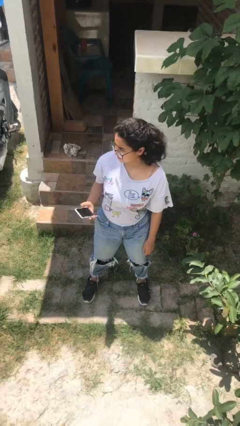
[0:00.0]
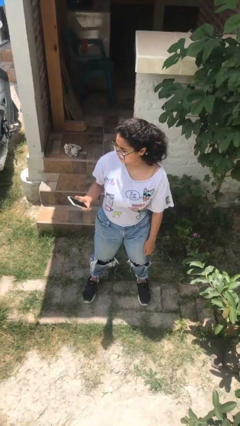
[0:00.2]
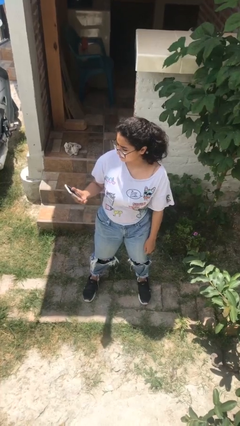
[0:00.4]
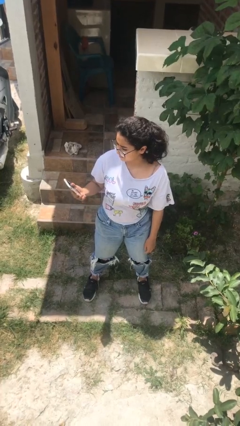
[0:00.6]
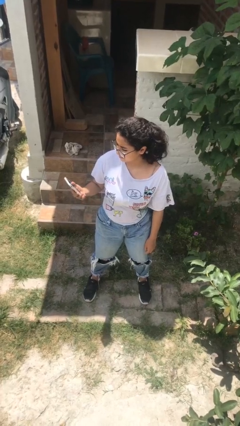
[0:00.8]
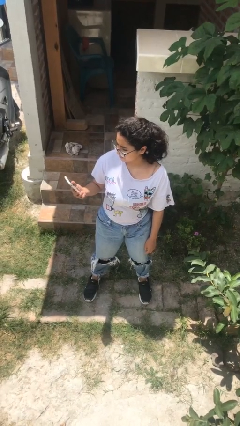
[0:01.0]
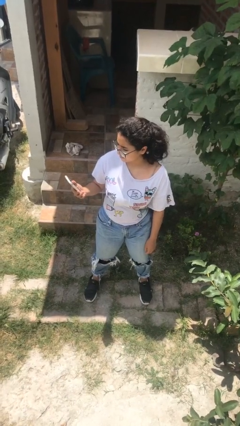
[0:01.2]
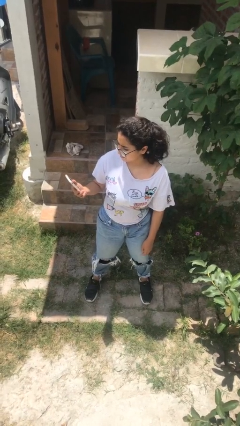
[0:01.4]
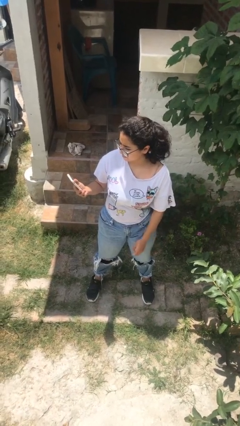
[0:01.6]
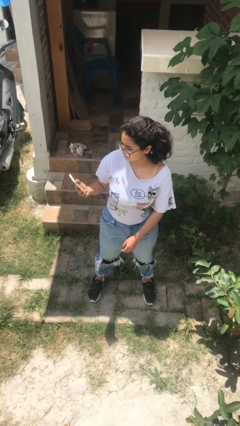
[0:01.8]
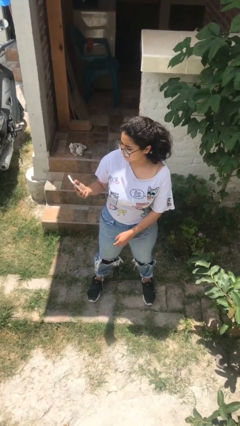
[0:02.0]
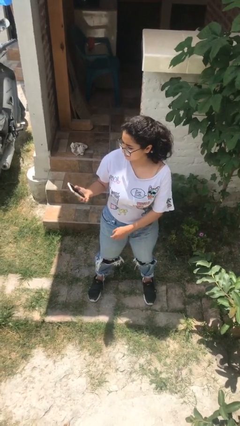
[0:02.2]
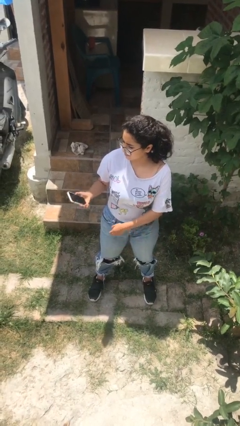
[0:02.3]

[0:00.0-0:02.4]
person puts phone into pocket

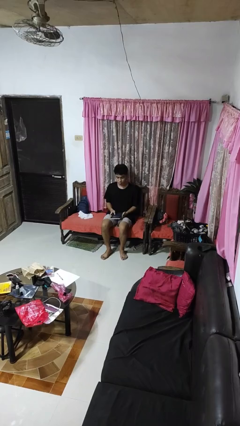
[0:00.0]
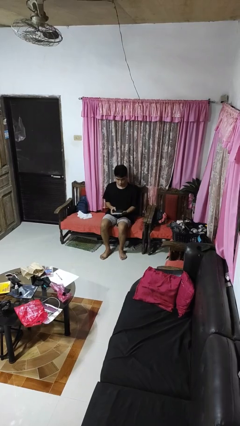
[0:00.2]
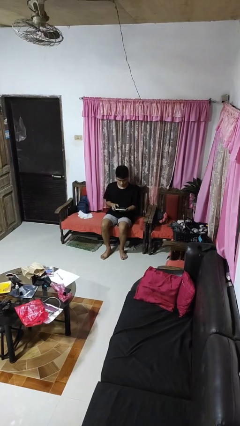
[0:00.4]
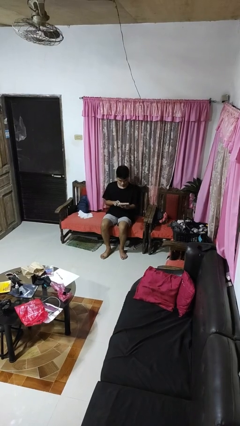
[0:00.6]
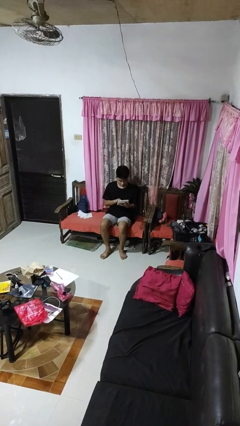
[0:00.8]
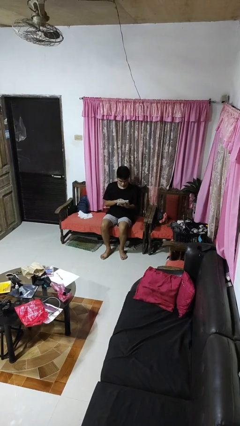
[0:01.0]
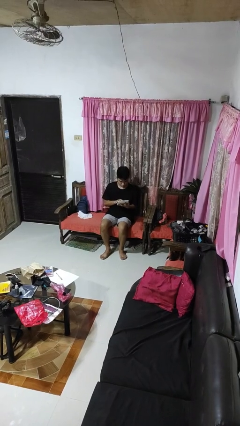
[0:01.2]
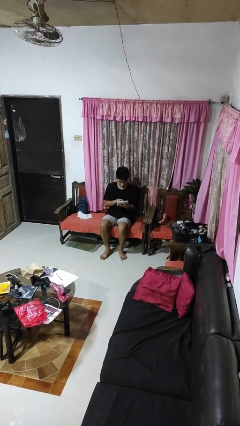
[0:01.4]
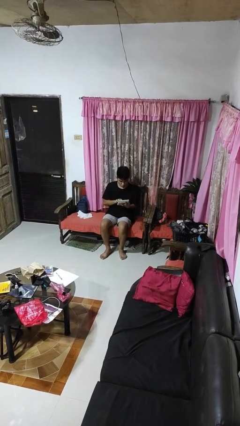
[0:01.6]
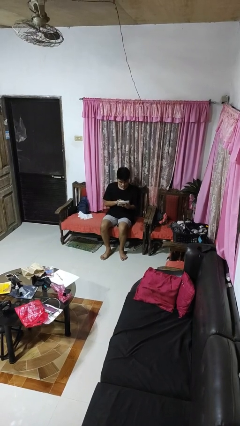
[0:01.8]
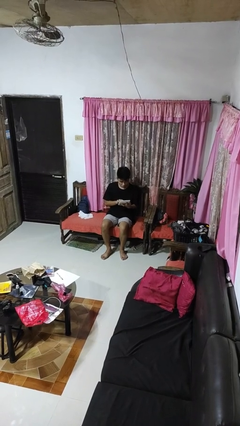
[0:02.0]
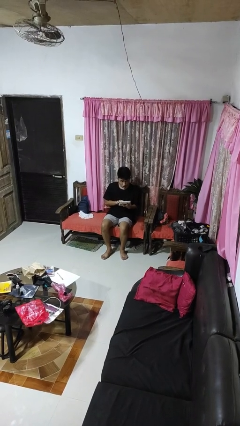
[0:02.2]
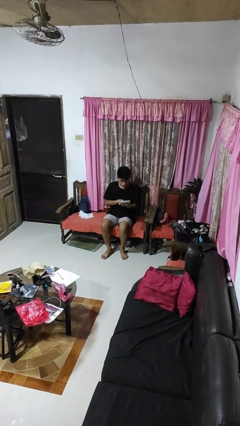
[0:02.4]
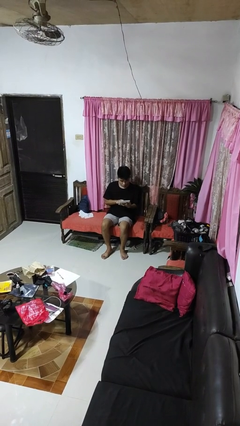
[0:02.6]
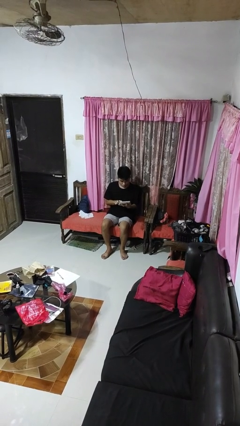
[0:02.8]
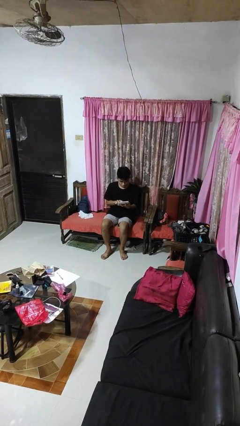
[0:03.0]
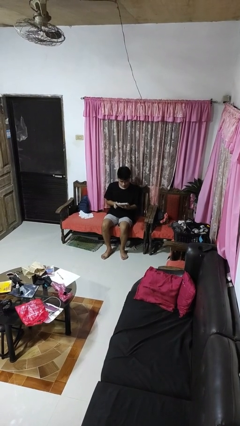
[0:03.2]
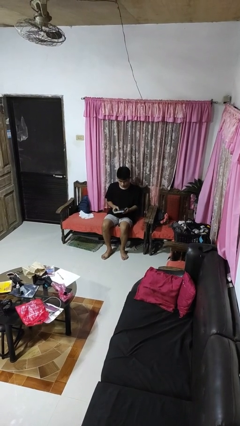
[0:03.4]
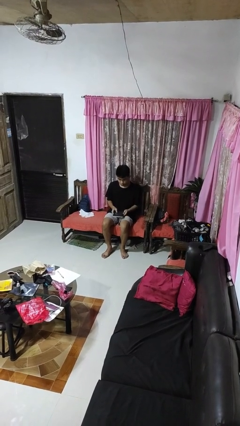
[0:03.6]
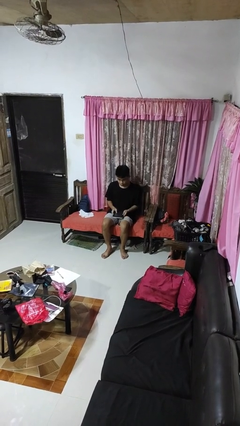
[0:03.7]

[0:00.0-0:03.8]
person interacts with tablet

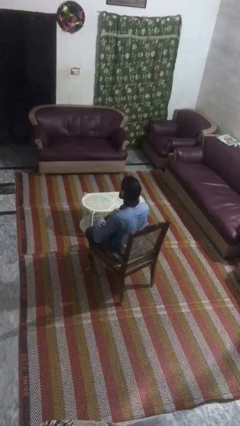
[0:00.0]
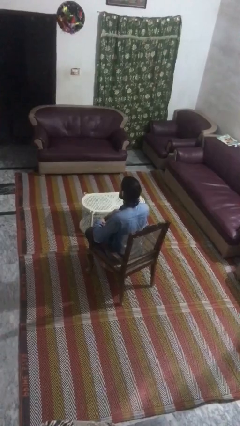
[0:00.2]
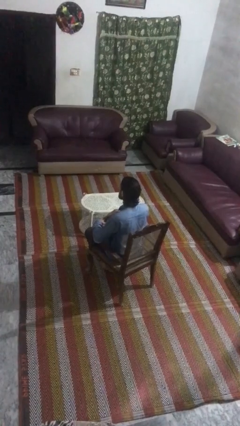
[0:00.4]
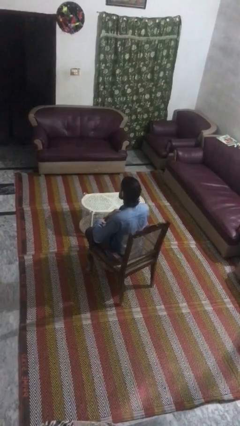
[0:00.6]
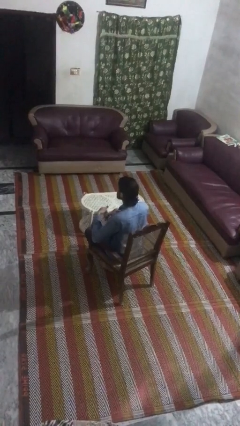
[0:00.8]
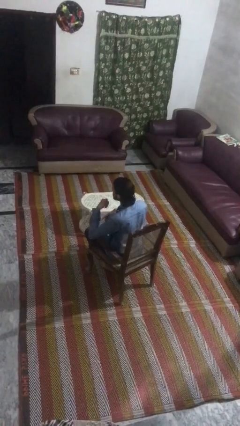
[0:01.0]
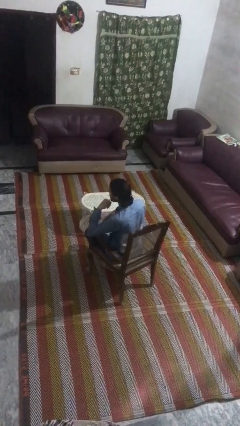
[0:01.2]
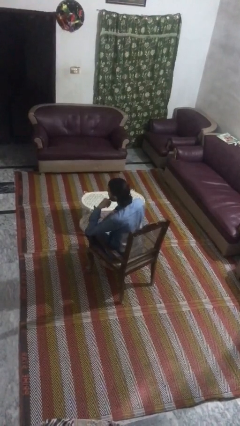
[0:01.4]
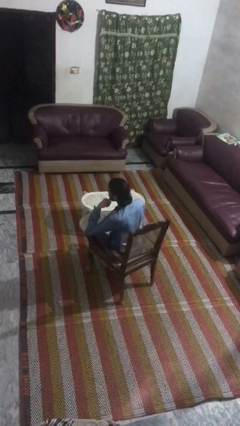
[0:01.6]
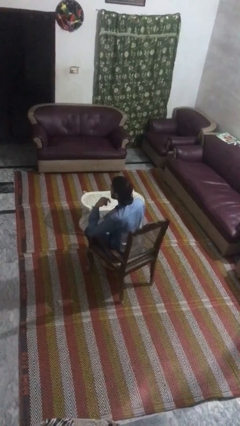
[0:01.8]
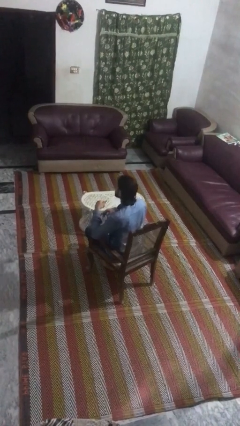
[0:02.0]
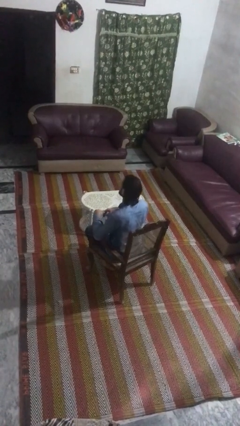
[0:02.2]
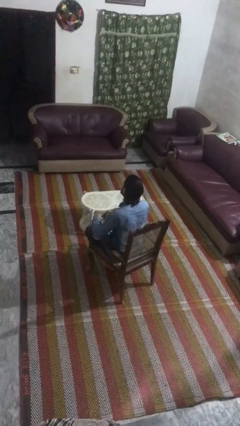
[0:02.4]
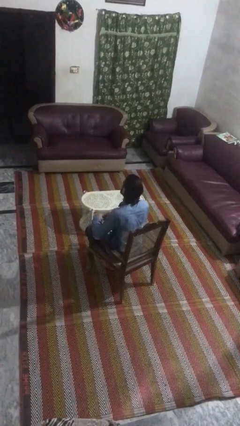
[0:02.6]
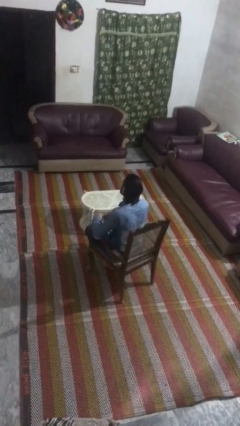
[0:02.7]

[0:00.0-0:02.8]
person gestures call me

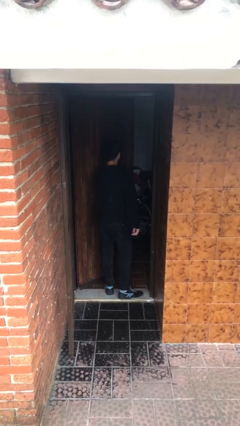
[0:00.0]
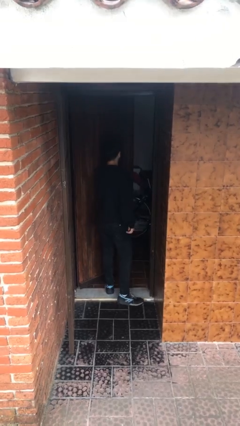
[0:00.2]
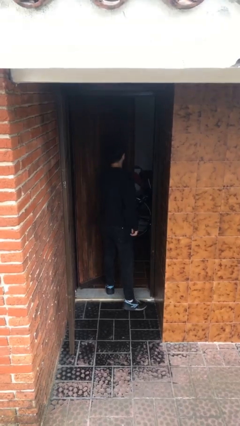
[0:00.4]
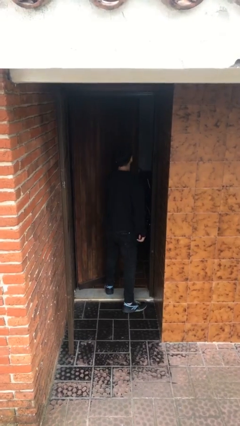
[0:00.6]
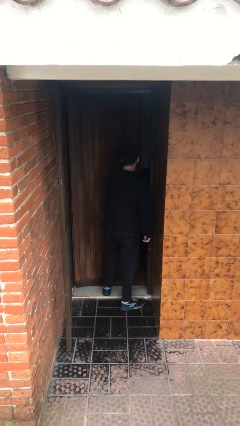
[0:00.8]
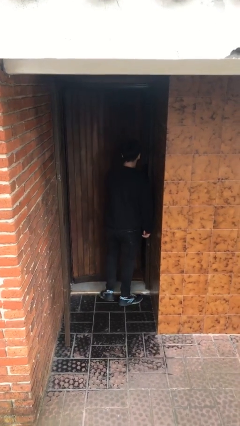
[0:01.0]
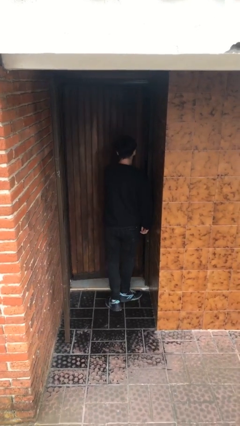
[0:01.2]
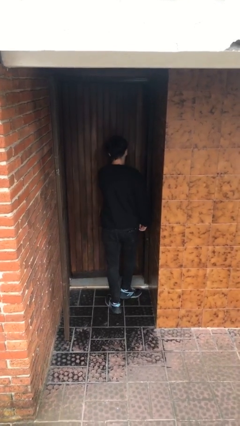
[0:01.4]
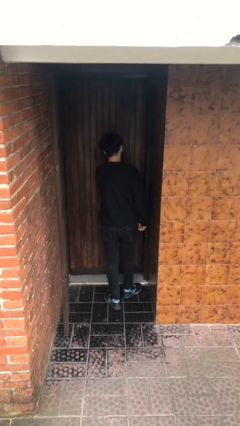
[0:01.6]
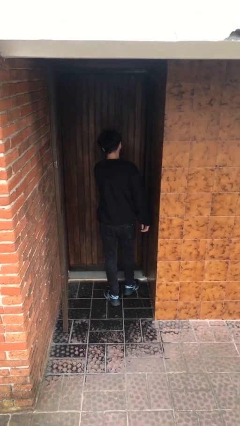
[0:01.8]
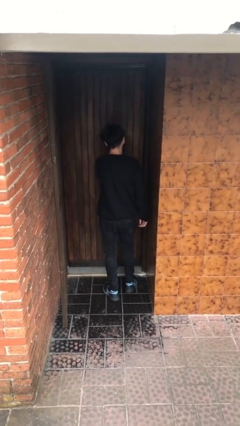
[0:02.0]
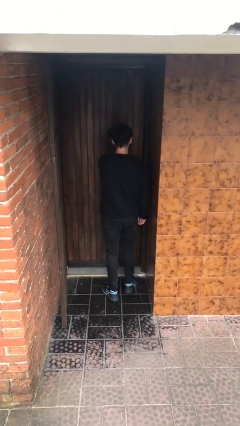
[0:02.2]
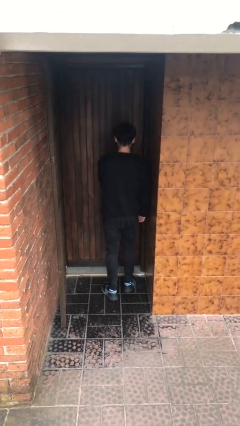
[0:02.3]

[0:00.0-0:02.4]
person closes facility door

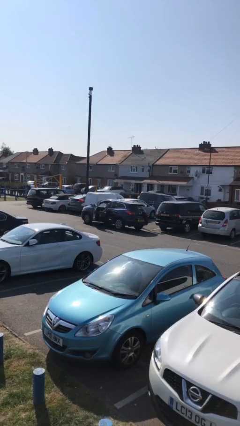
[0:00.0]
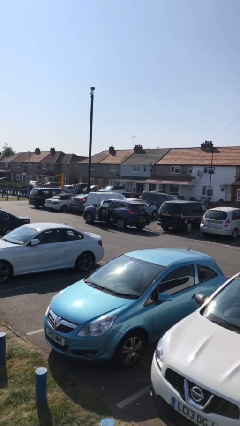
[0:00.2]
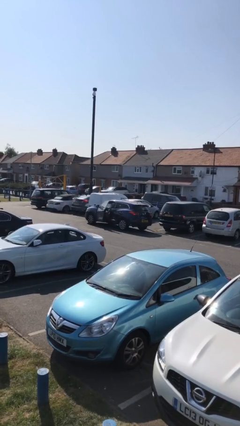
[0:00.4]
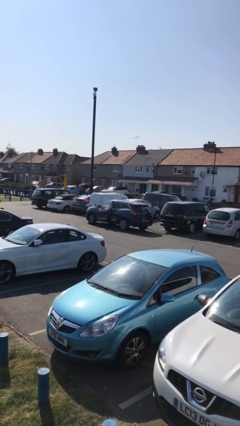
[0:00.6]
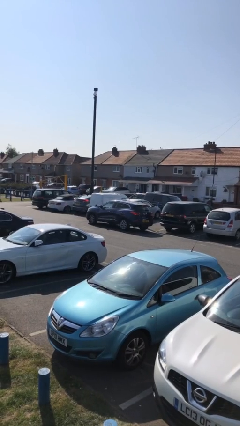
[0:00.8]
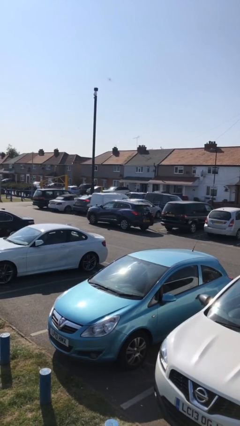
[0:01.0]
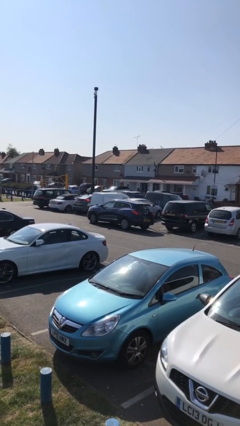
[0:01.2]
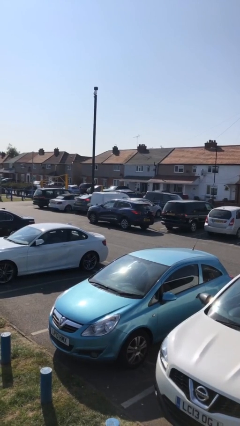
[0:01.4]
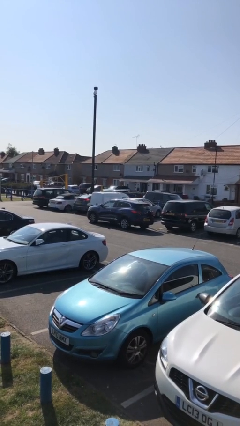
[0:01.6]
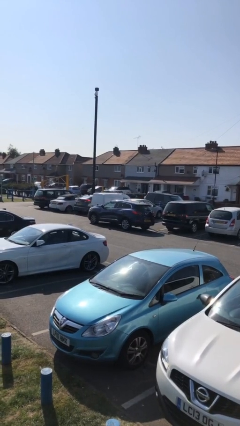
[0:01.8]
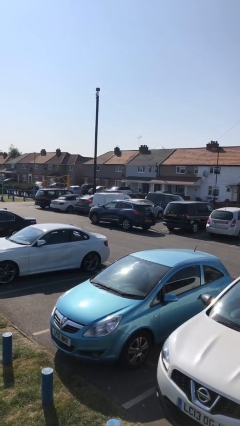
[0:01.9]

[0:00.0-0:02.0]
car picks up person

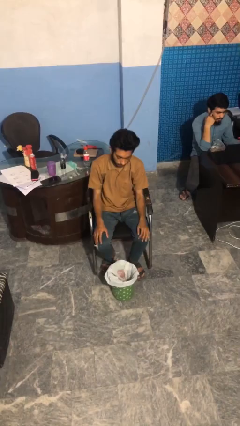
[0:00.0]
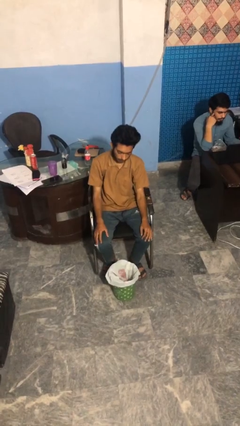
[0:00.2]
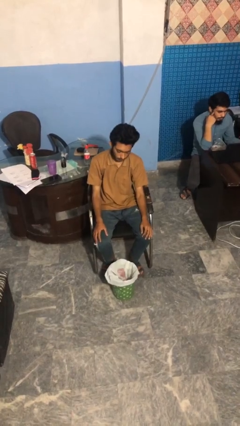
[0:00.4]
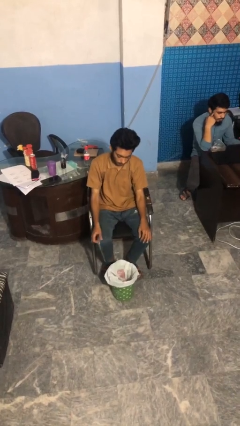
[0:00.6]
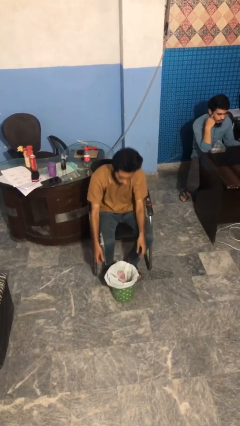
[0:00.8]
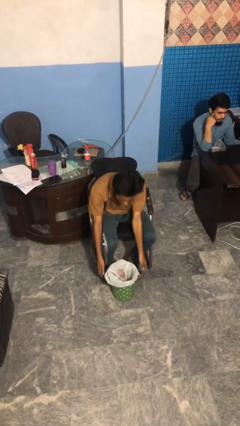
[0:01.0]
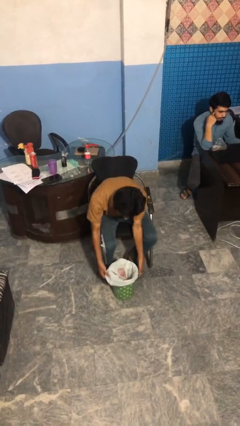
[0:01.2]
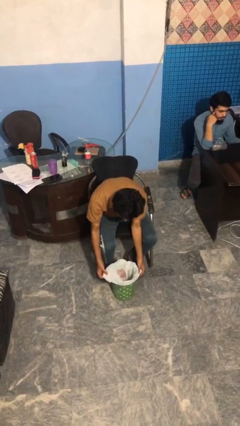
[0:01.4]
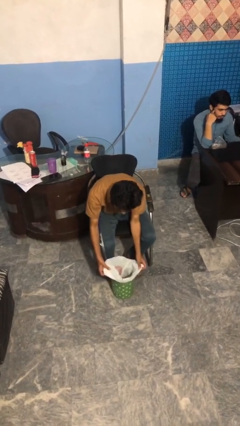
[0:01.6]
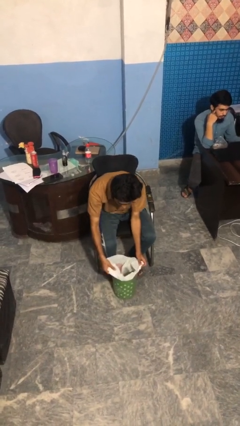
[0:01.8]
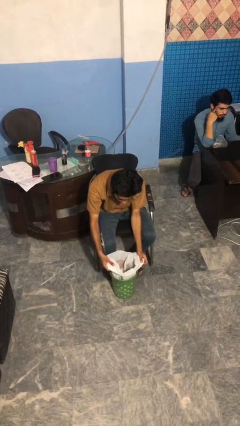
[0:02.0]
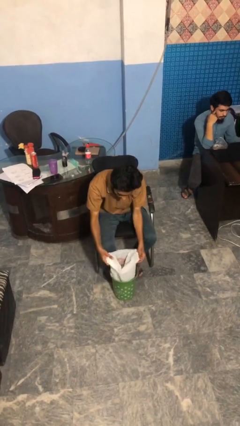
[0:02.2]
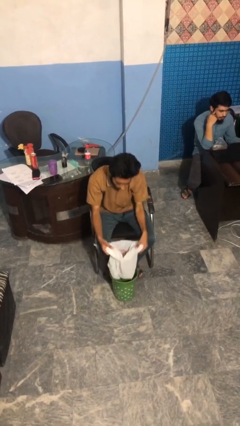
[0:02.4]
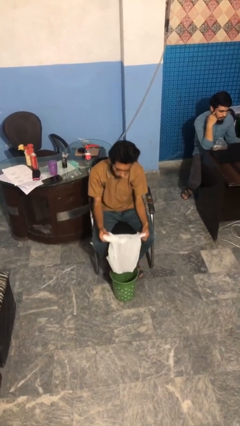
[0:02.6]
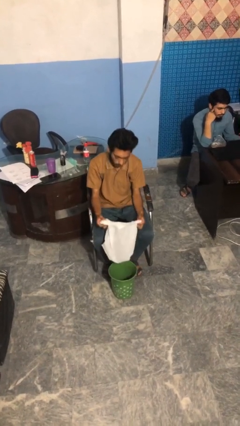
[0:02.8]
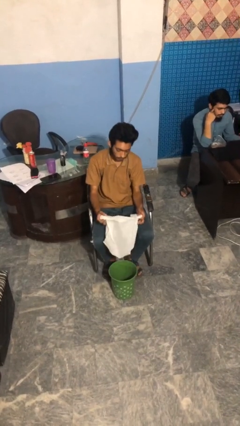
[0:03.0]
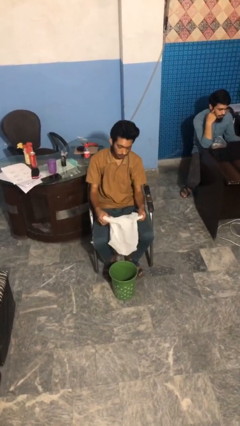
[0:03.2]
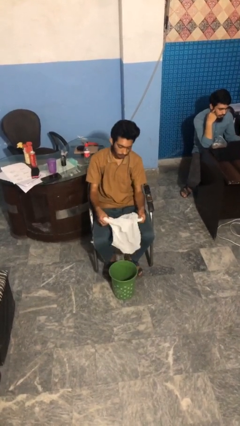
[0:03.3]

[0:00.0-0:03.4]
person removes trashbag from trashcan

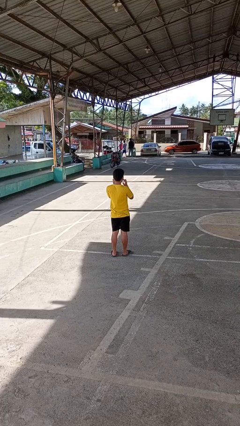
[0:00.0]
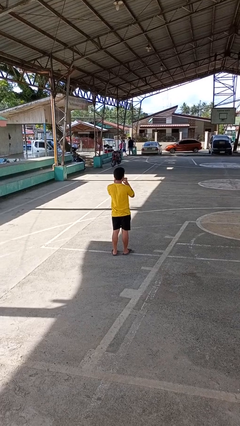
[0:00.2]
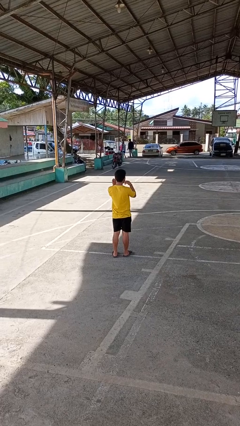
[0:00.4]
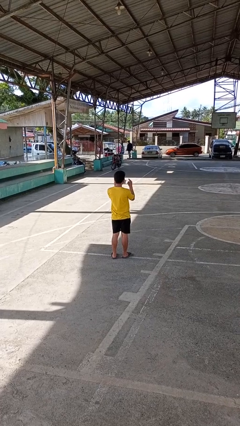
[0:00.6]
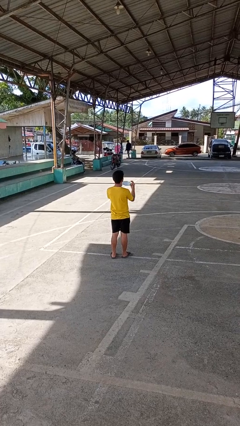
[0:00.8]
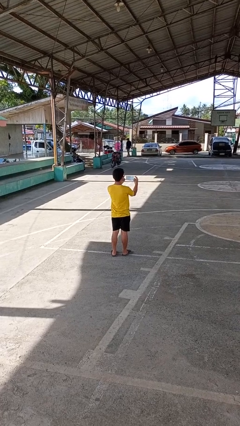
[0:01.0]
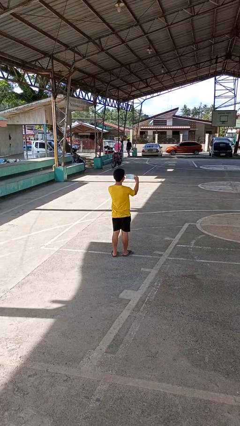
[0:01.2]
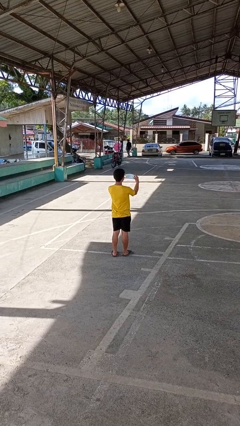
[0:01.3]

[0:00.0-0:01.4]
person takes off facemask
